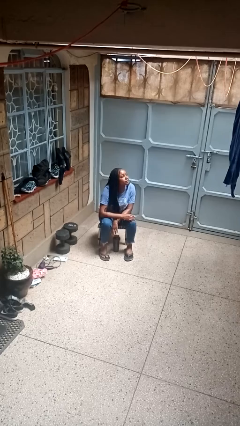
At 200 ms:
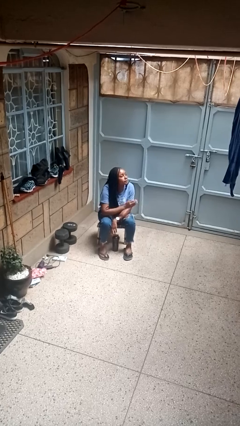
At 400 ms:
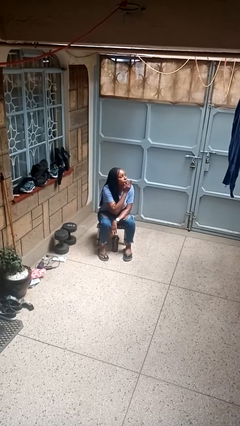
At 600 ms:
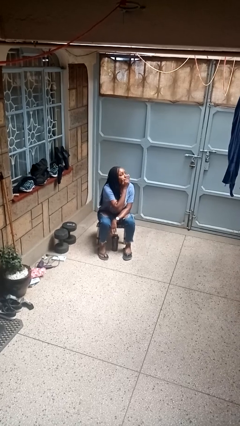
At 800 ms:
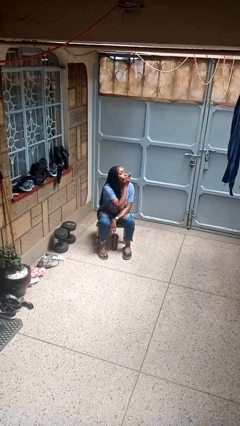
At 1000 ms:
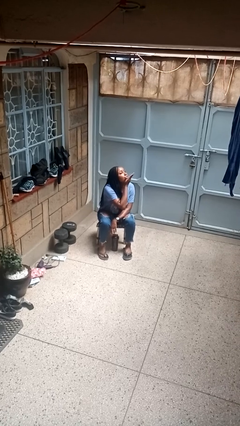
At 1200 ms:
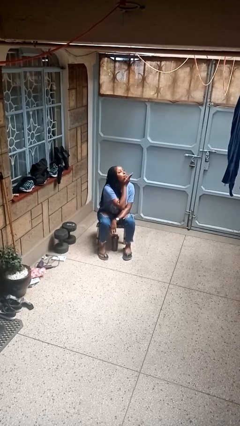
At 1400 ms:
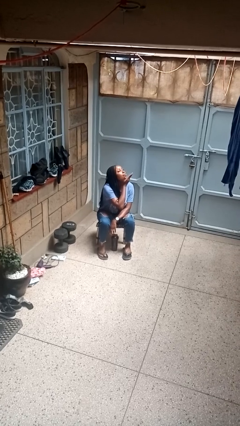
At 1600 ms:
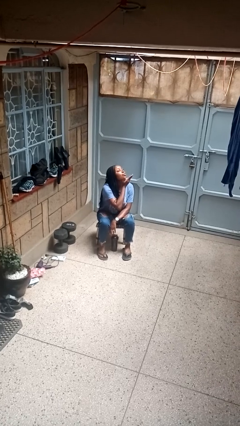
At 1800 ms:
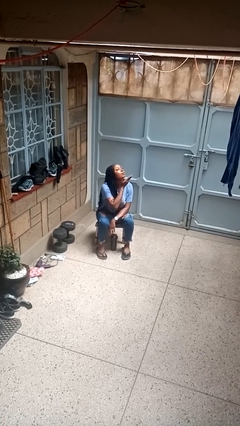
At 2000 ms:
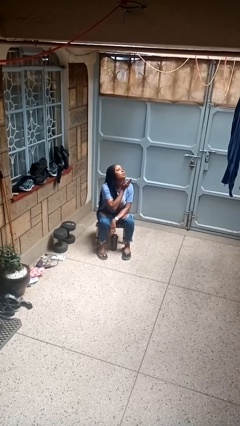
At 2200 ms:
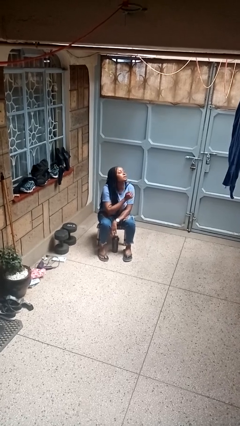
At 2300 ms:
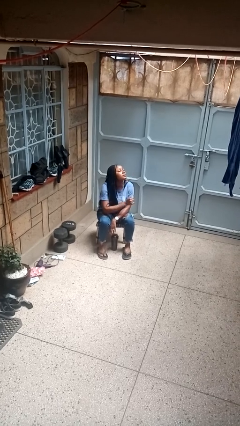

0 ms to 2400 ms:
person gestures blow kiss

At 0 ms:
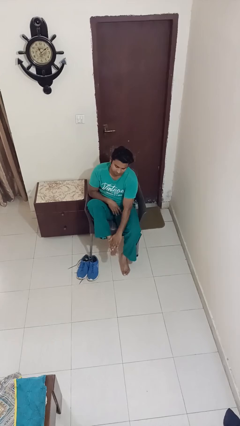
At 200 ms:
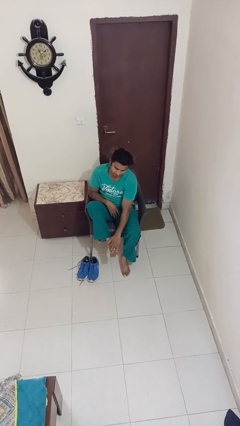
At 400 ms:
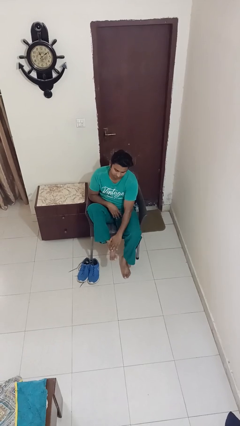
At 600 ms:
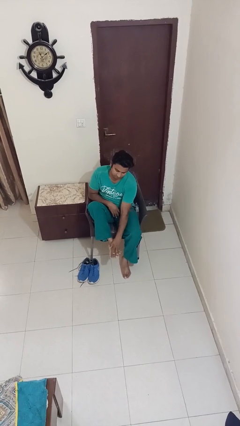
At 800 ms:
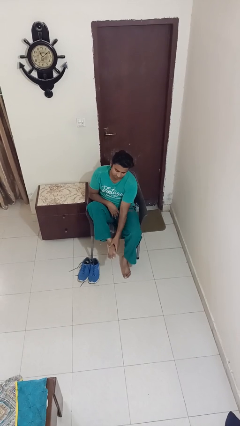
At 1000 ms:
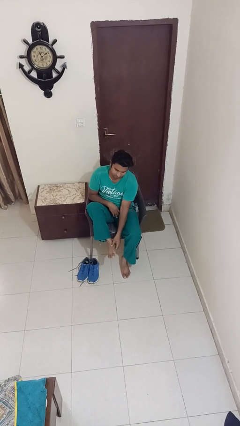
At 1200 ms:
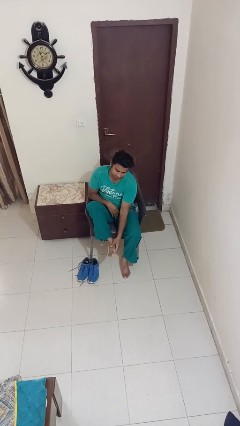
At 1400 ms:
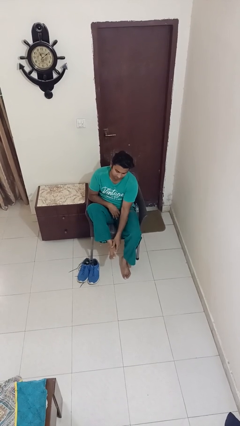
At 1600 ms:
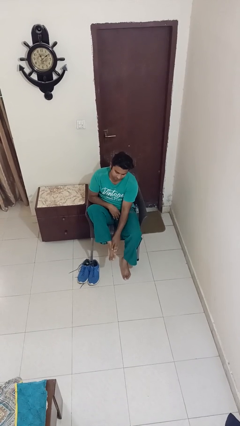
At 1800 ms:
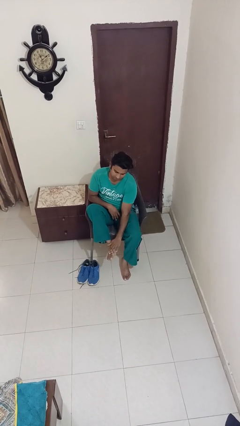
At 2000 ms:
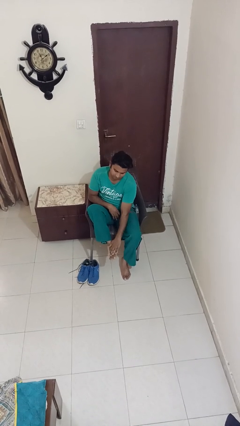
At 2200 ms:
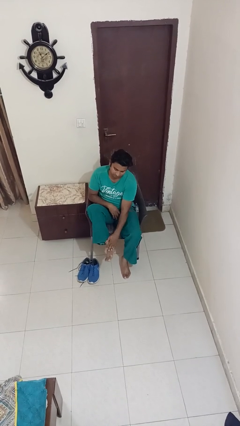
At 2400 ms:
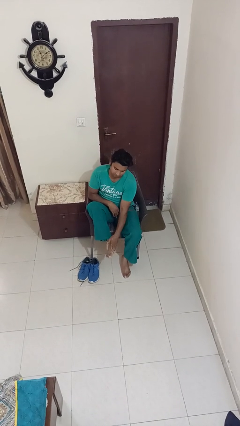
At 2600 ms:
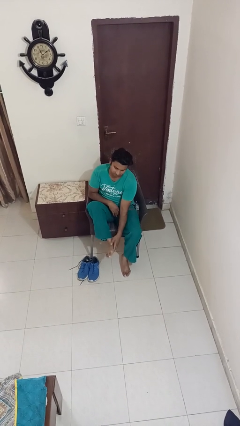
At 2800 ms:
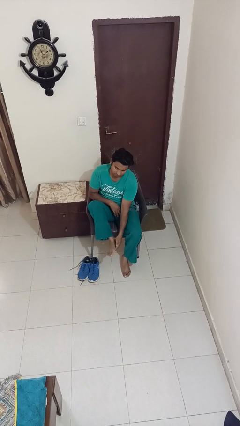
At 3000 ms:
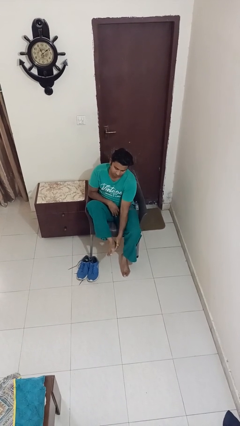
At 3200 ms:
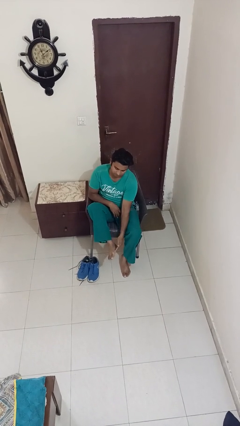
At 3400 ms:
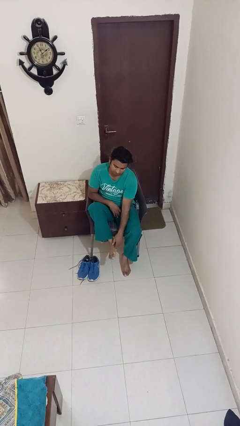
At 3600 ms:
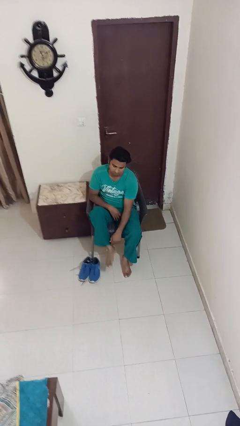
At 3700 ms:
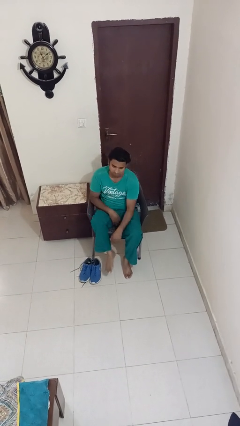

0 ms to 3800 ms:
person rubs foot

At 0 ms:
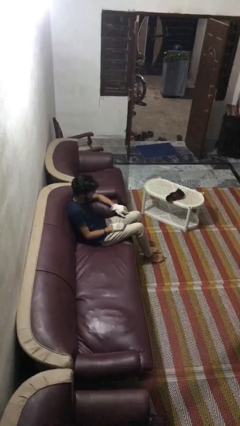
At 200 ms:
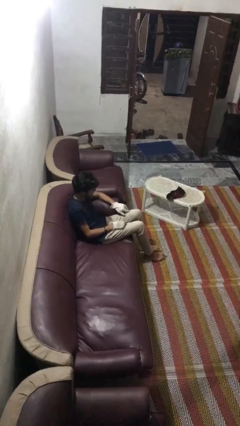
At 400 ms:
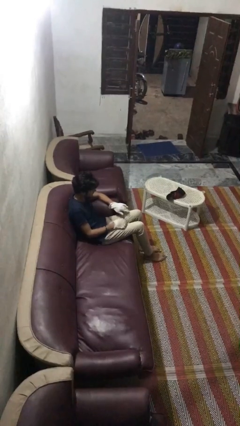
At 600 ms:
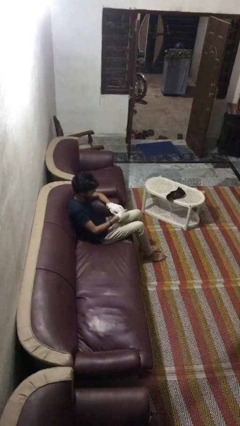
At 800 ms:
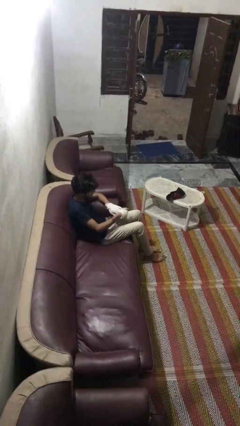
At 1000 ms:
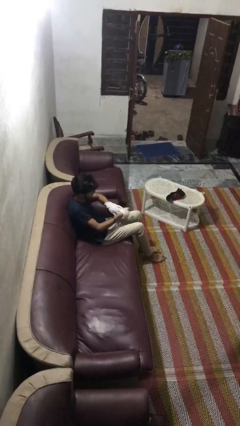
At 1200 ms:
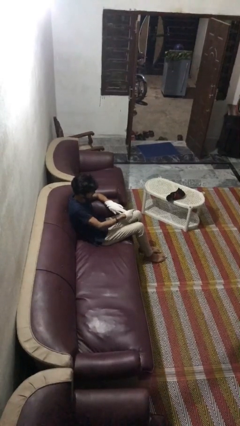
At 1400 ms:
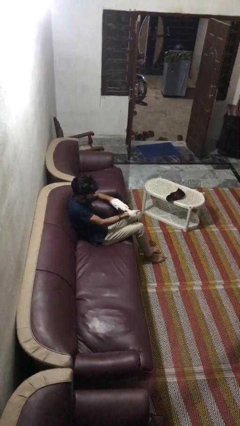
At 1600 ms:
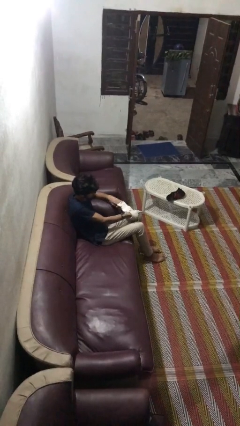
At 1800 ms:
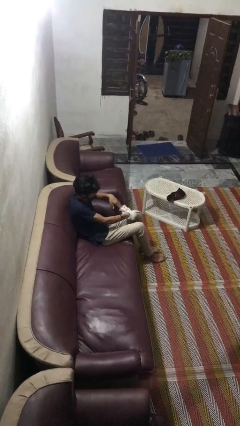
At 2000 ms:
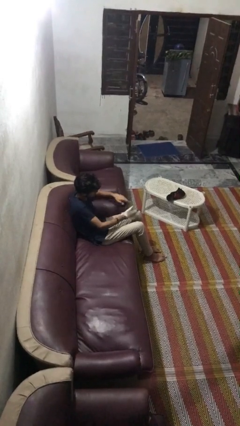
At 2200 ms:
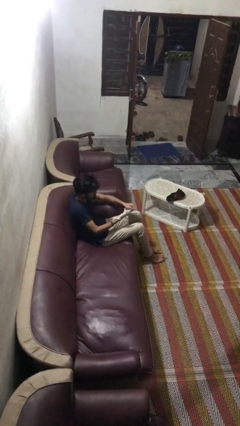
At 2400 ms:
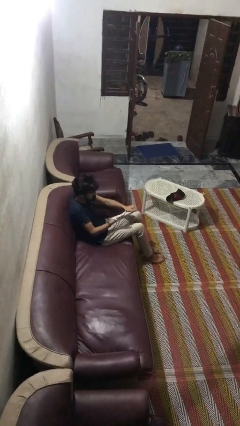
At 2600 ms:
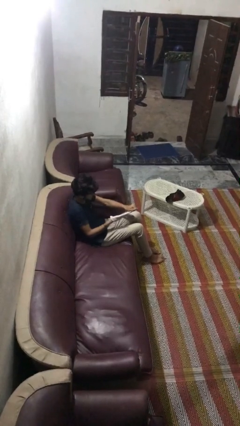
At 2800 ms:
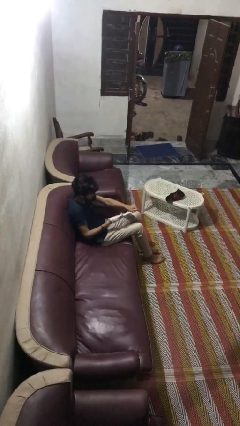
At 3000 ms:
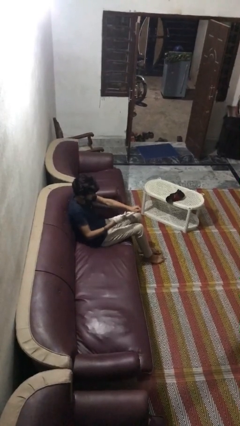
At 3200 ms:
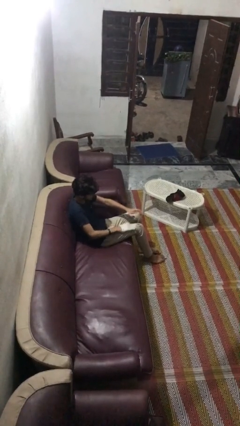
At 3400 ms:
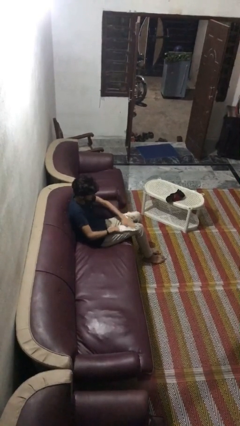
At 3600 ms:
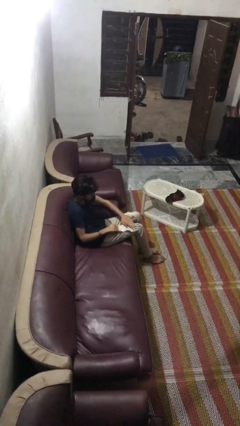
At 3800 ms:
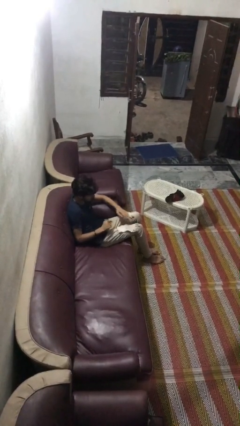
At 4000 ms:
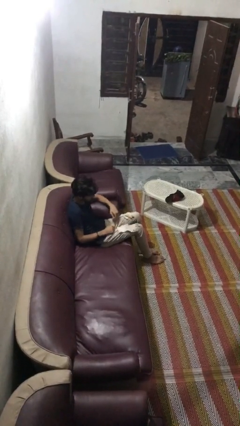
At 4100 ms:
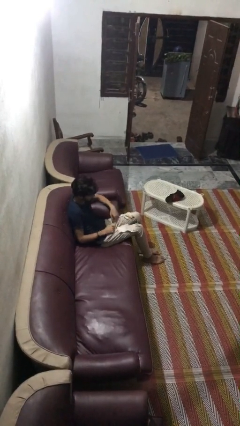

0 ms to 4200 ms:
person takes off gloves

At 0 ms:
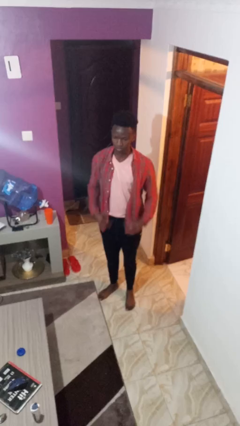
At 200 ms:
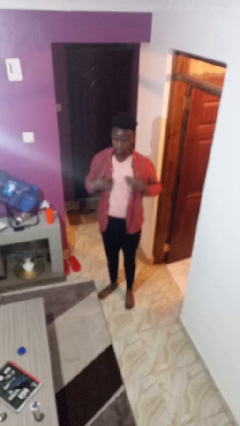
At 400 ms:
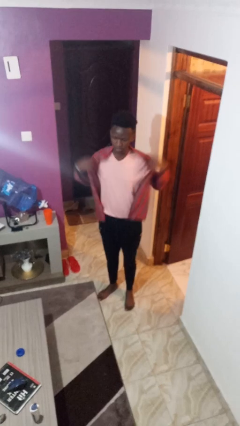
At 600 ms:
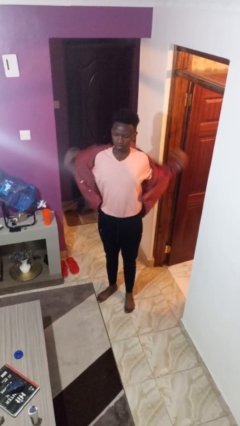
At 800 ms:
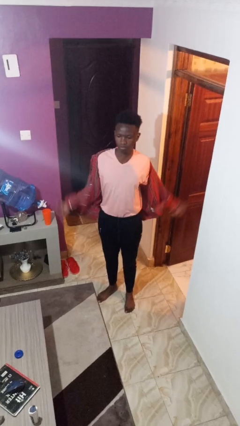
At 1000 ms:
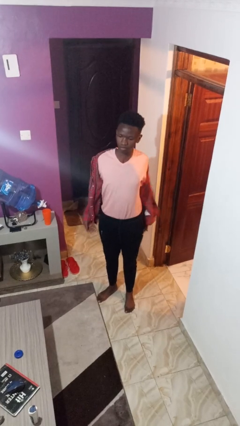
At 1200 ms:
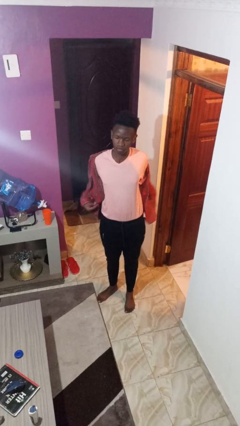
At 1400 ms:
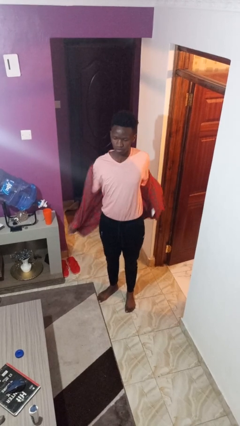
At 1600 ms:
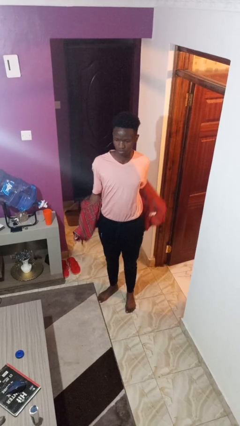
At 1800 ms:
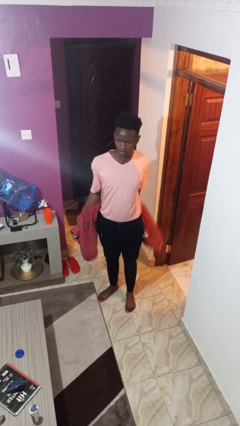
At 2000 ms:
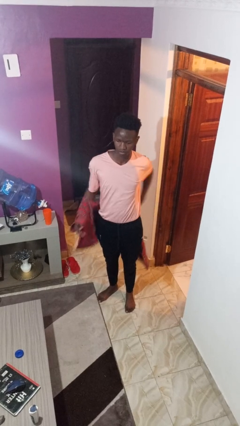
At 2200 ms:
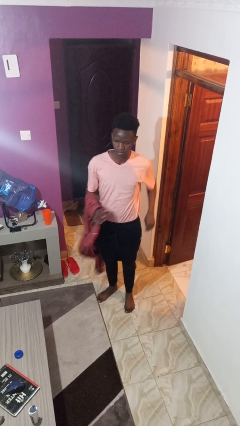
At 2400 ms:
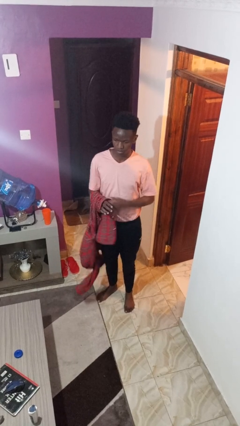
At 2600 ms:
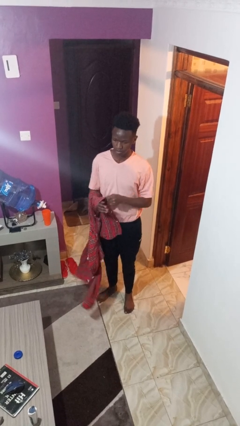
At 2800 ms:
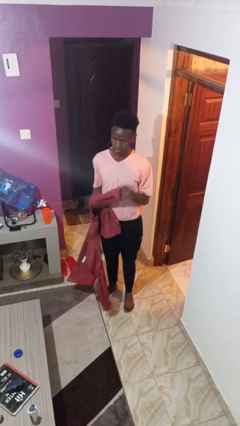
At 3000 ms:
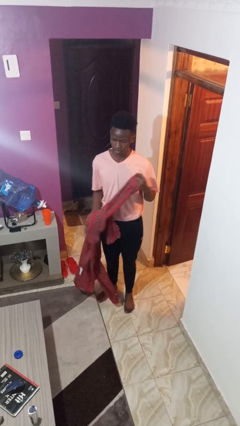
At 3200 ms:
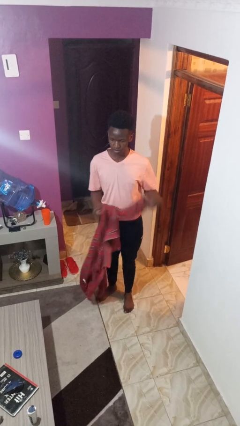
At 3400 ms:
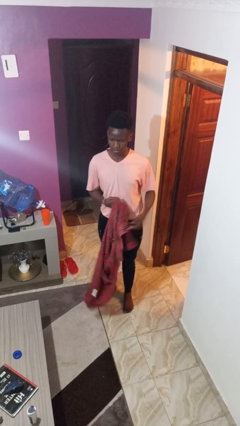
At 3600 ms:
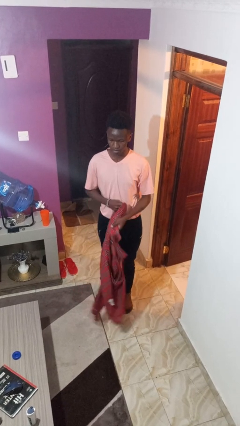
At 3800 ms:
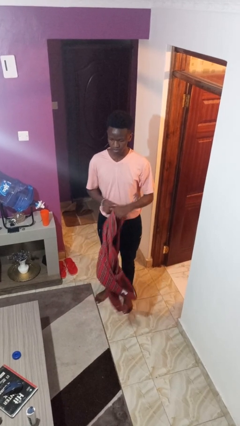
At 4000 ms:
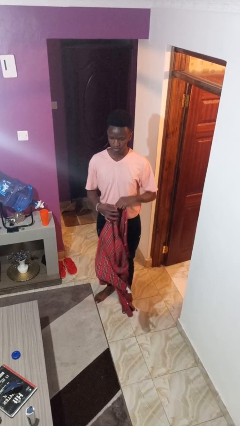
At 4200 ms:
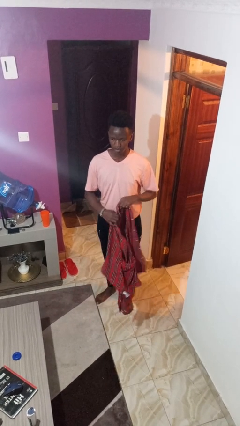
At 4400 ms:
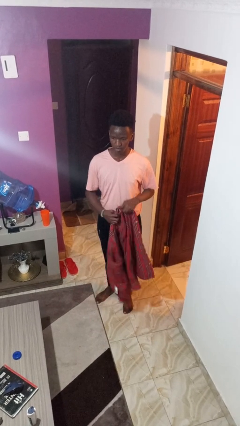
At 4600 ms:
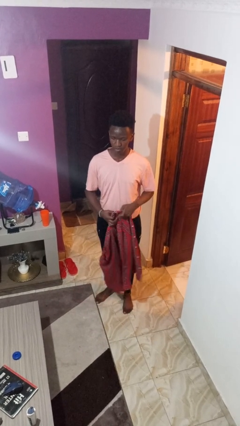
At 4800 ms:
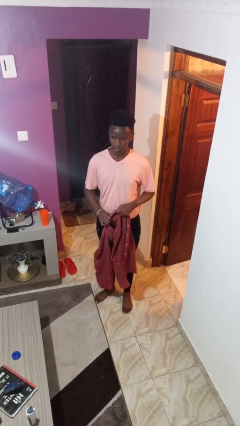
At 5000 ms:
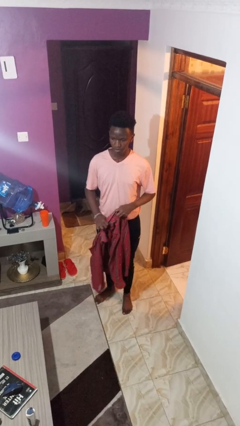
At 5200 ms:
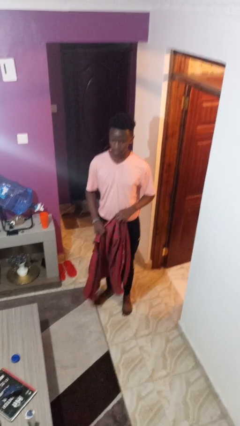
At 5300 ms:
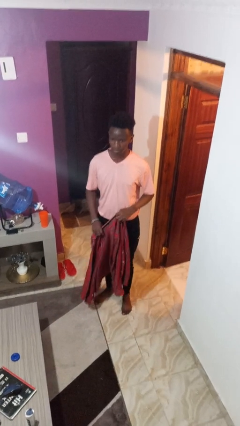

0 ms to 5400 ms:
person takes off shirt

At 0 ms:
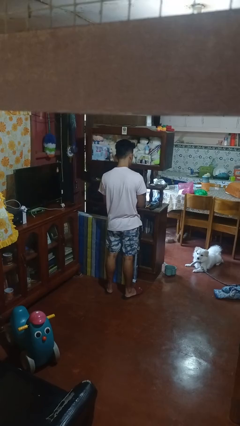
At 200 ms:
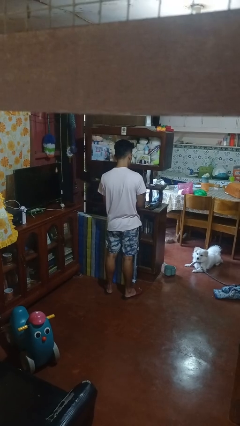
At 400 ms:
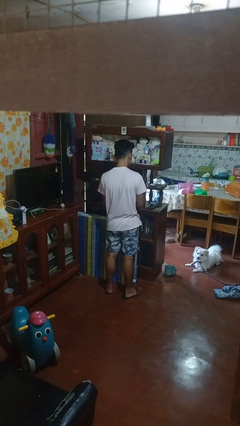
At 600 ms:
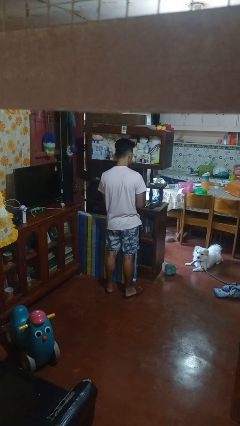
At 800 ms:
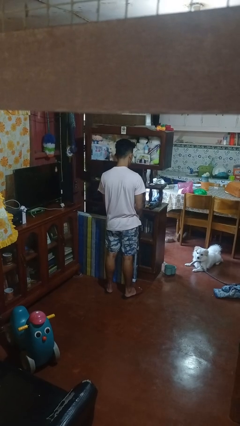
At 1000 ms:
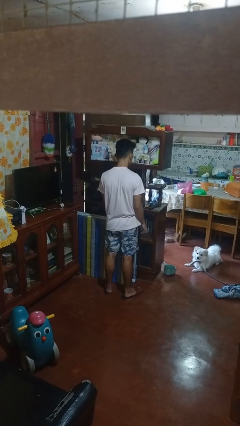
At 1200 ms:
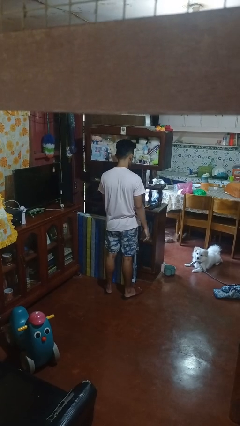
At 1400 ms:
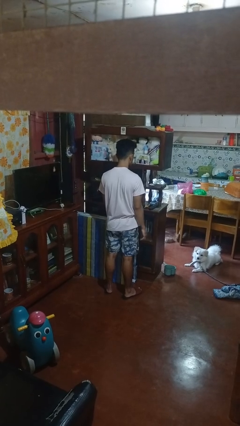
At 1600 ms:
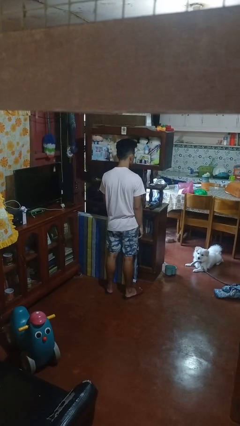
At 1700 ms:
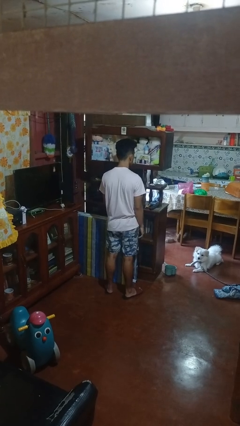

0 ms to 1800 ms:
person puts down object on shelf
